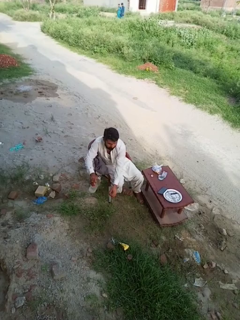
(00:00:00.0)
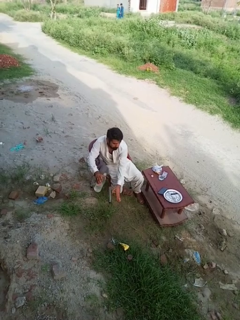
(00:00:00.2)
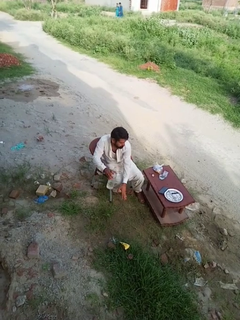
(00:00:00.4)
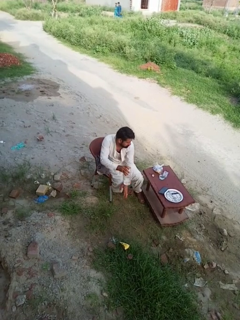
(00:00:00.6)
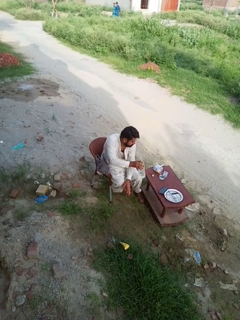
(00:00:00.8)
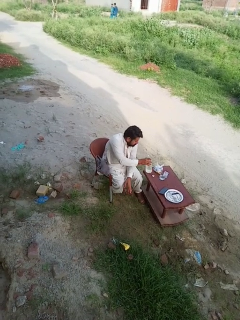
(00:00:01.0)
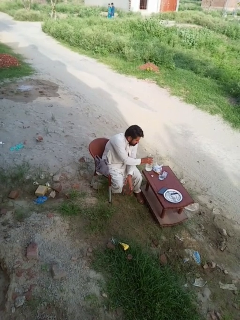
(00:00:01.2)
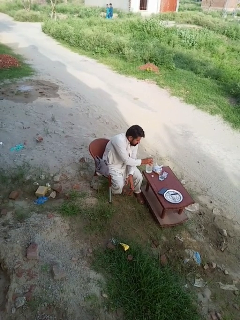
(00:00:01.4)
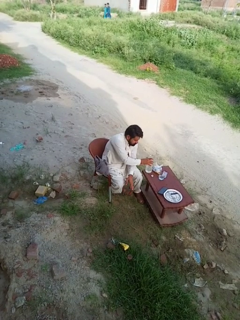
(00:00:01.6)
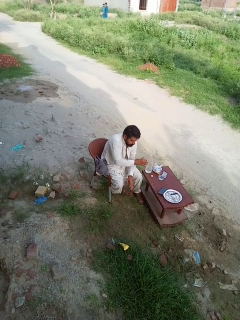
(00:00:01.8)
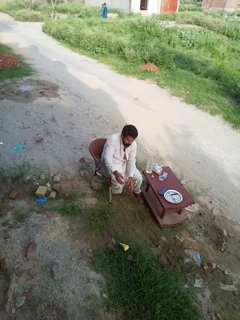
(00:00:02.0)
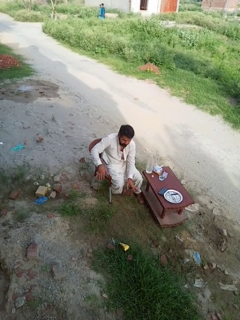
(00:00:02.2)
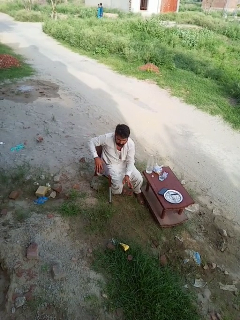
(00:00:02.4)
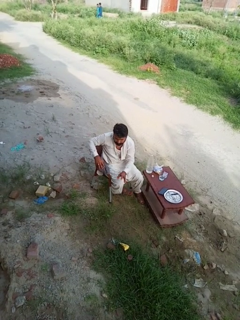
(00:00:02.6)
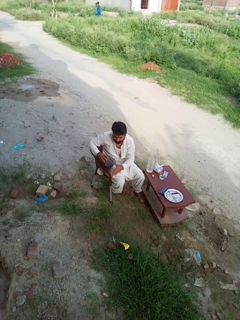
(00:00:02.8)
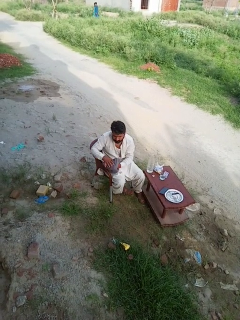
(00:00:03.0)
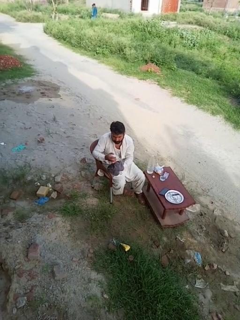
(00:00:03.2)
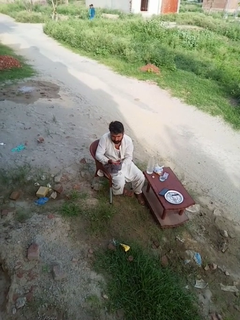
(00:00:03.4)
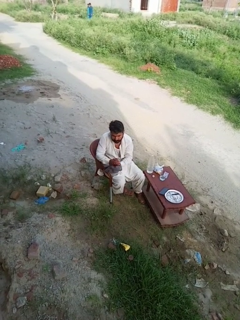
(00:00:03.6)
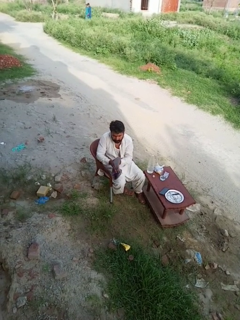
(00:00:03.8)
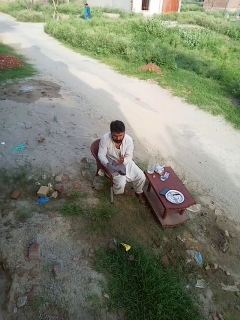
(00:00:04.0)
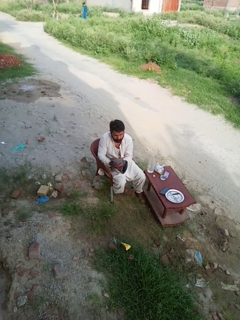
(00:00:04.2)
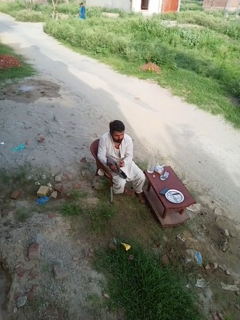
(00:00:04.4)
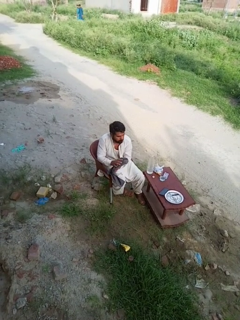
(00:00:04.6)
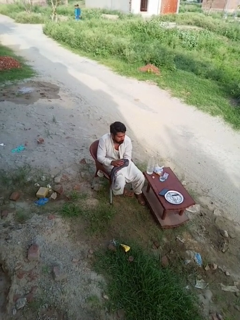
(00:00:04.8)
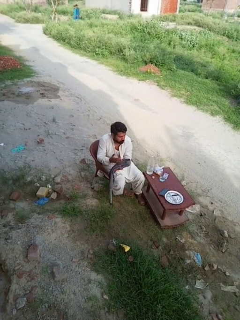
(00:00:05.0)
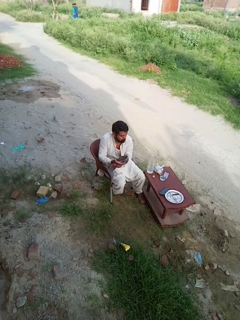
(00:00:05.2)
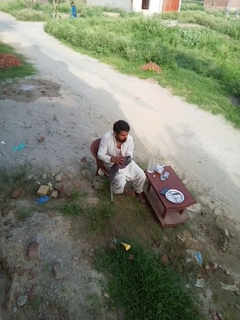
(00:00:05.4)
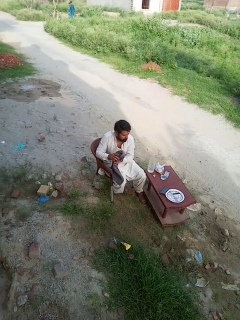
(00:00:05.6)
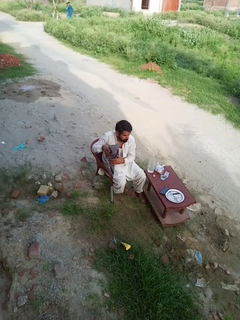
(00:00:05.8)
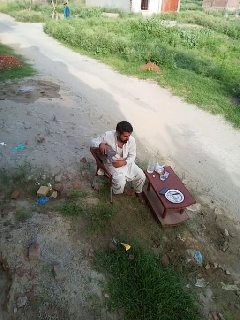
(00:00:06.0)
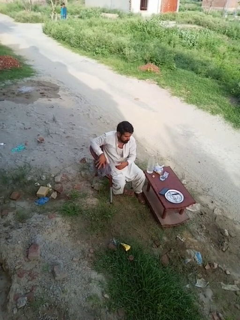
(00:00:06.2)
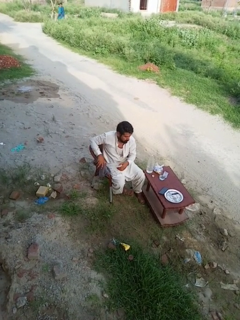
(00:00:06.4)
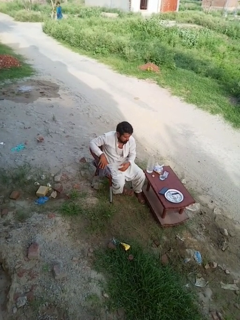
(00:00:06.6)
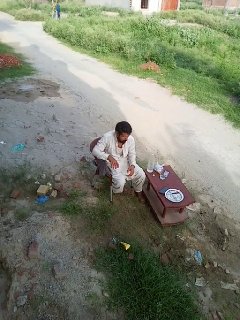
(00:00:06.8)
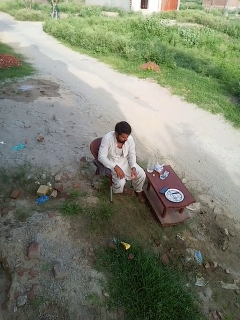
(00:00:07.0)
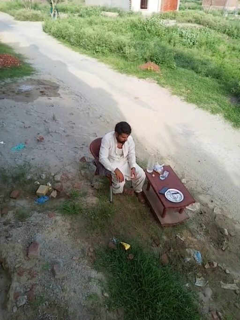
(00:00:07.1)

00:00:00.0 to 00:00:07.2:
person dries hands with towel

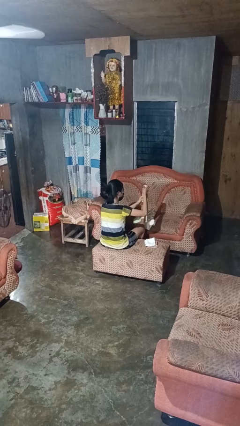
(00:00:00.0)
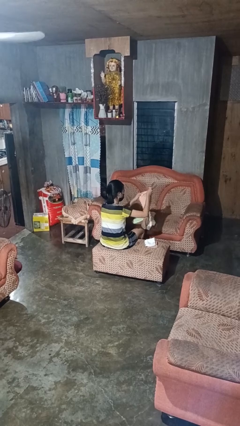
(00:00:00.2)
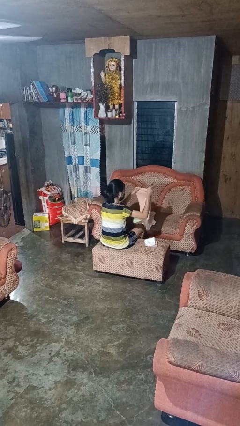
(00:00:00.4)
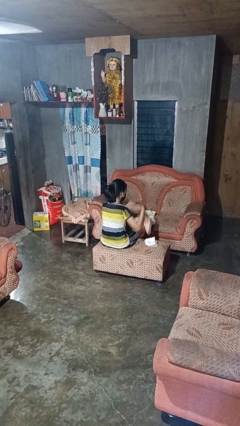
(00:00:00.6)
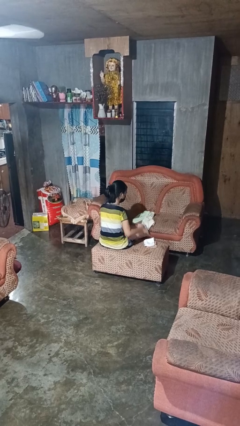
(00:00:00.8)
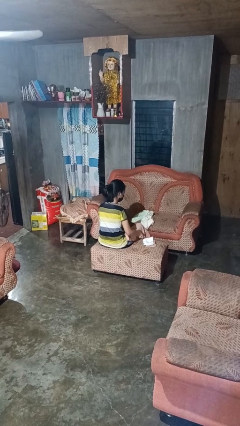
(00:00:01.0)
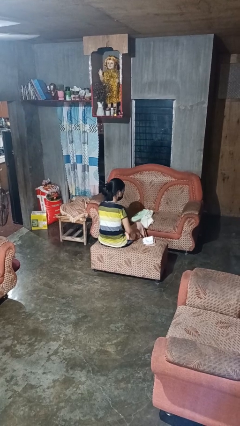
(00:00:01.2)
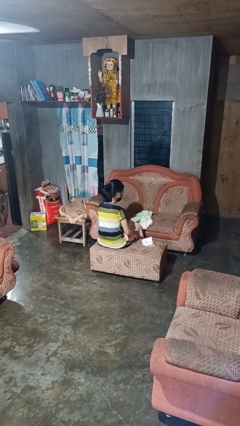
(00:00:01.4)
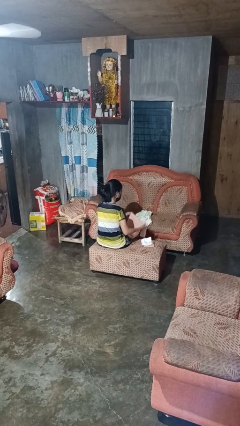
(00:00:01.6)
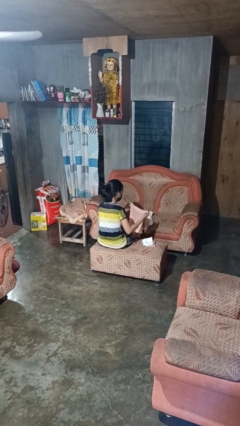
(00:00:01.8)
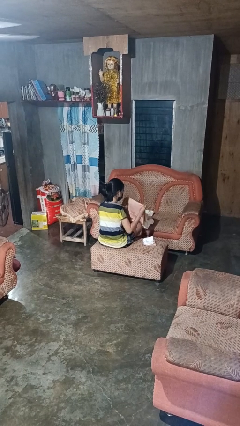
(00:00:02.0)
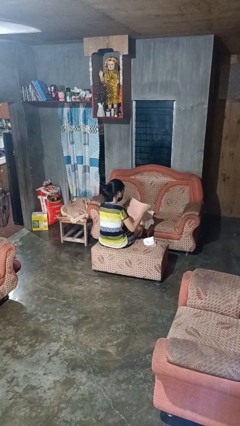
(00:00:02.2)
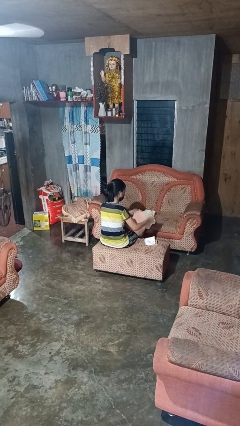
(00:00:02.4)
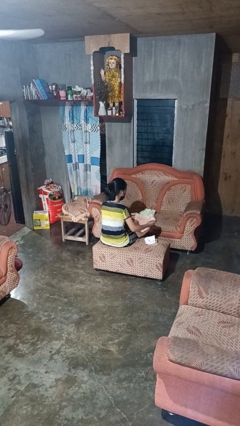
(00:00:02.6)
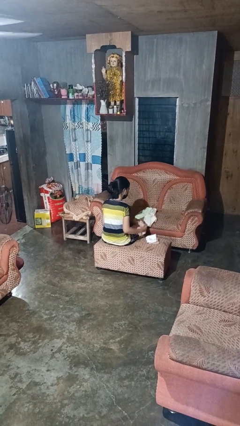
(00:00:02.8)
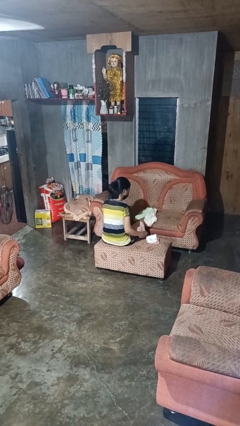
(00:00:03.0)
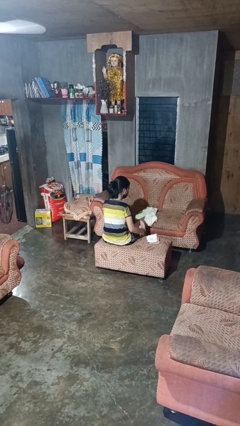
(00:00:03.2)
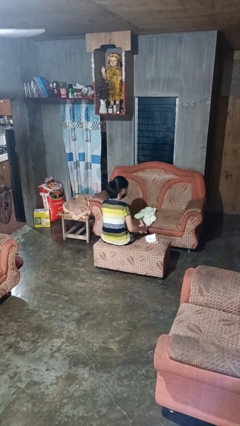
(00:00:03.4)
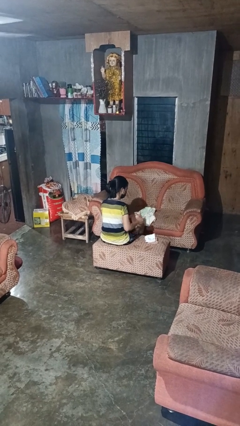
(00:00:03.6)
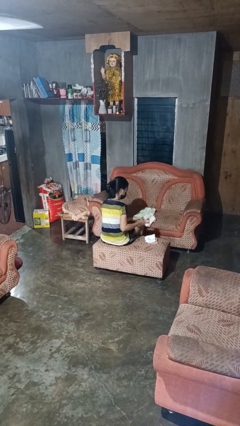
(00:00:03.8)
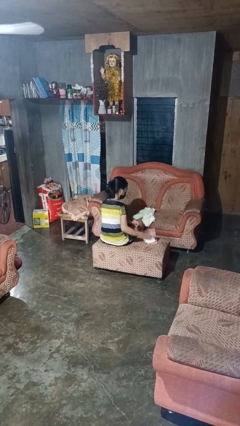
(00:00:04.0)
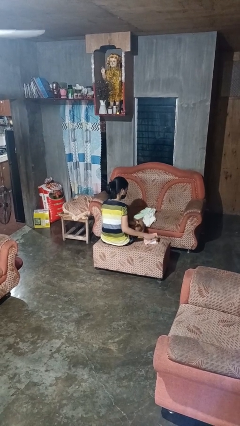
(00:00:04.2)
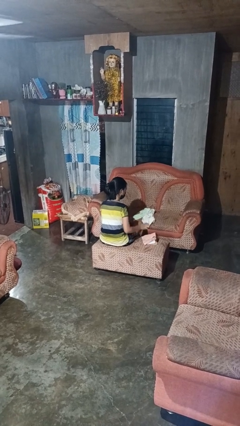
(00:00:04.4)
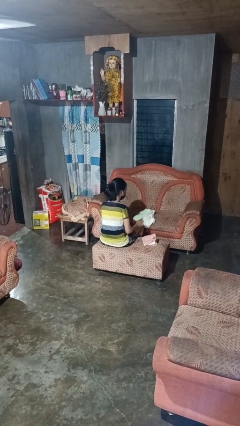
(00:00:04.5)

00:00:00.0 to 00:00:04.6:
person folds towel

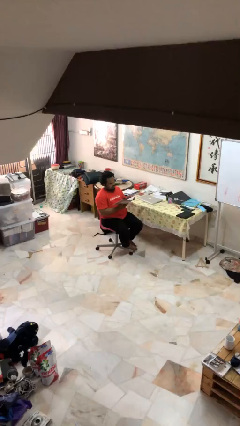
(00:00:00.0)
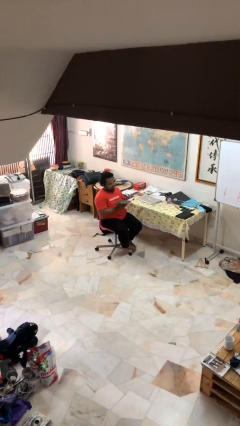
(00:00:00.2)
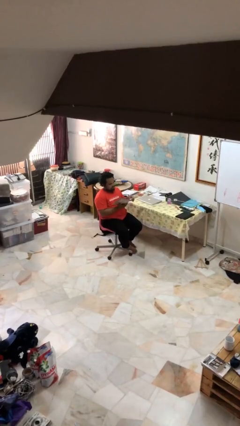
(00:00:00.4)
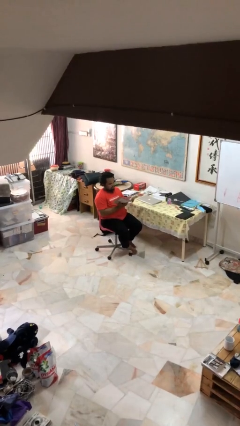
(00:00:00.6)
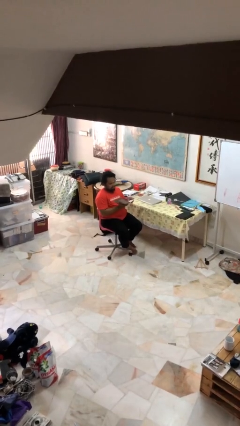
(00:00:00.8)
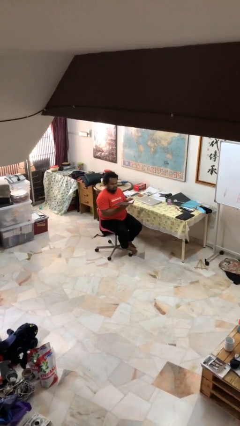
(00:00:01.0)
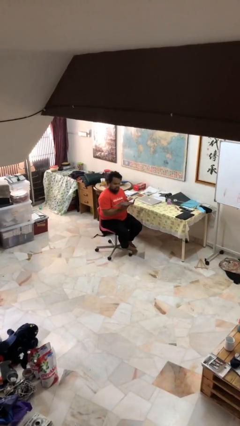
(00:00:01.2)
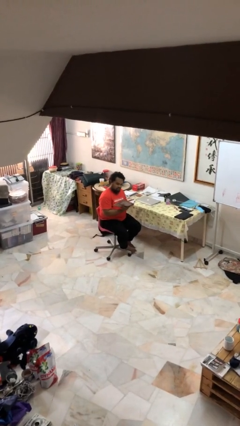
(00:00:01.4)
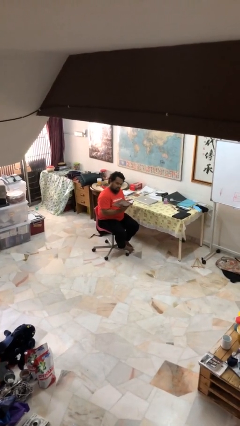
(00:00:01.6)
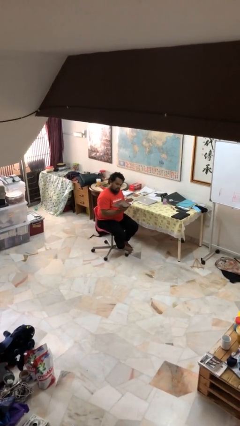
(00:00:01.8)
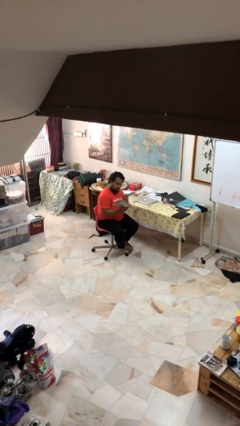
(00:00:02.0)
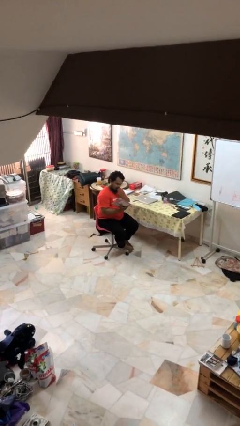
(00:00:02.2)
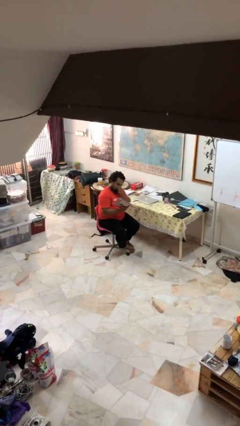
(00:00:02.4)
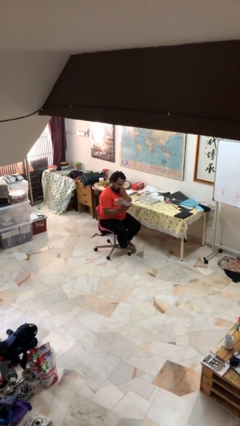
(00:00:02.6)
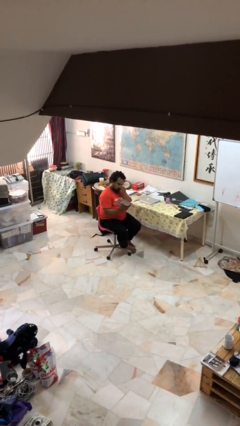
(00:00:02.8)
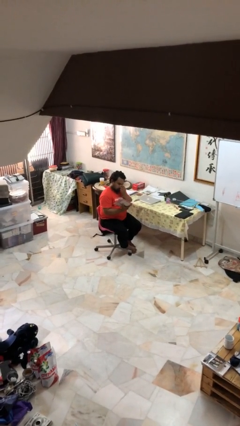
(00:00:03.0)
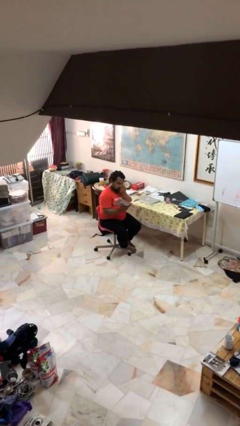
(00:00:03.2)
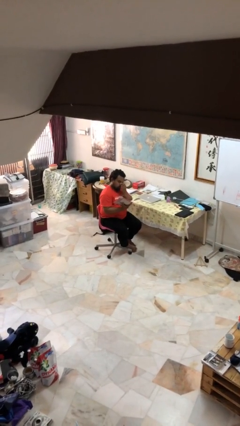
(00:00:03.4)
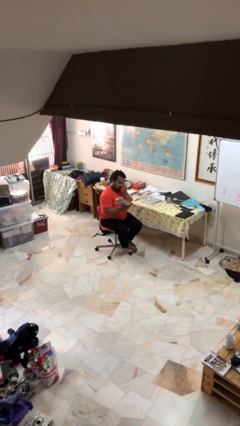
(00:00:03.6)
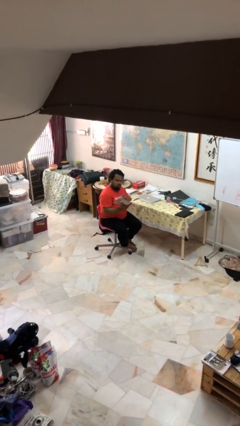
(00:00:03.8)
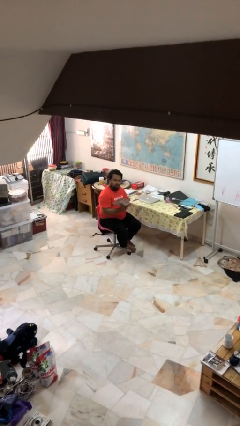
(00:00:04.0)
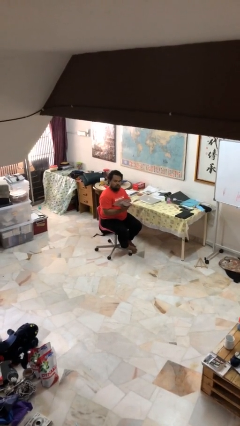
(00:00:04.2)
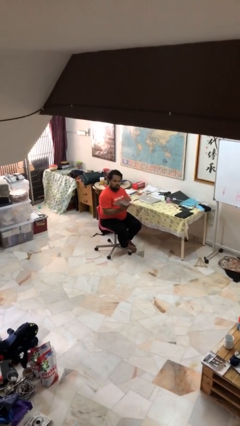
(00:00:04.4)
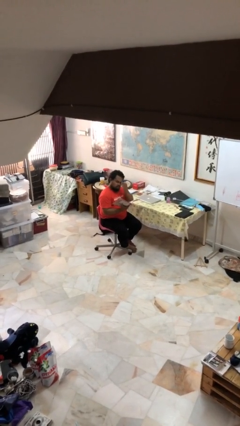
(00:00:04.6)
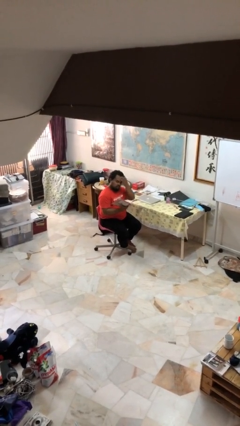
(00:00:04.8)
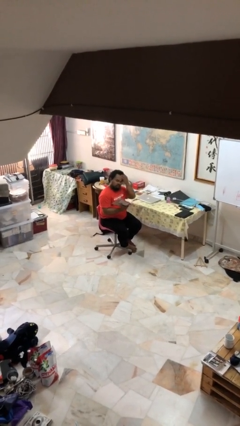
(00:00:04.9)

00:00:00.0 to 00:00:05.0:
person reads document

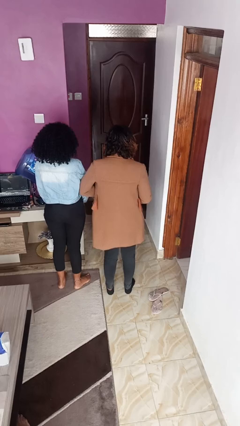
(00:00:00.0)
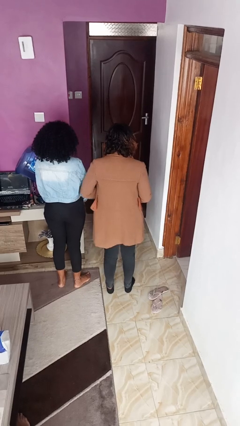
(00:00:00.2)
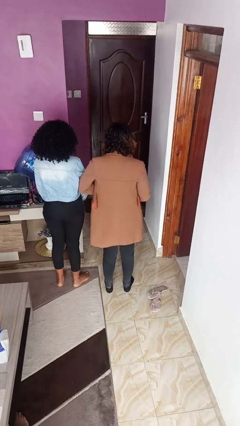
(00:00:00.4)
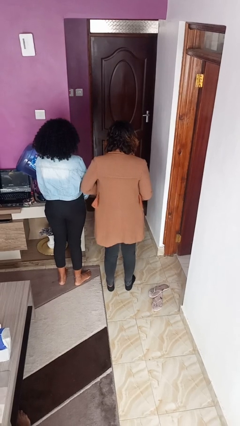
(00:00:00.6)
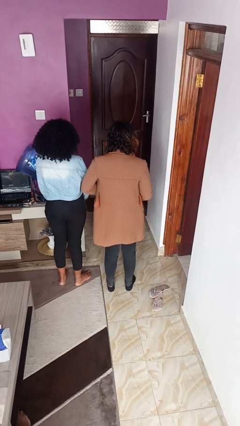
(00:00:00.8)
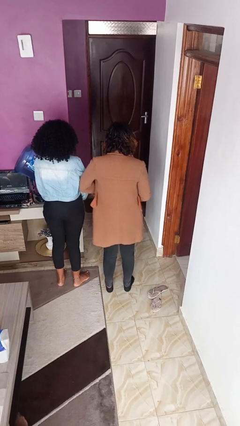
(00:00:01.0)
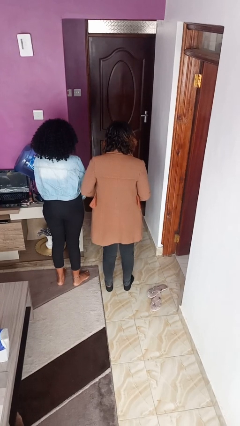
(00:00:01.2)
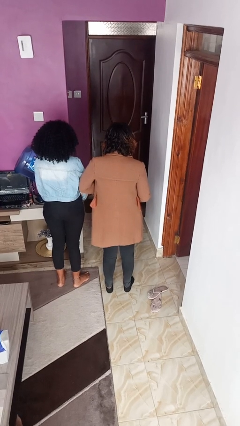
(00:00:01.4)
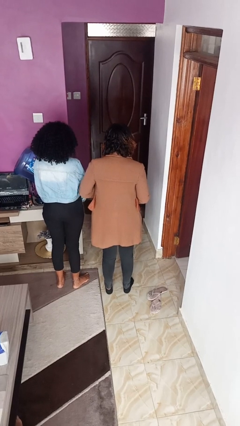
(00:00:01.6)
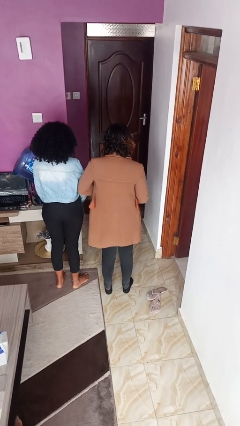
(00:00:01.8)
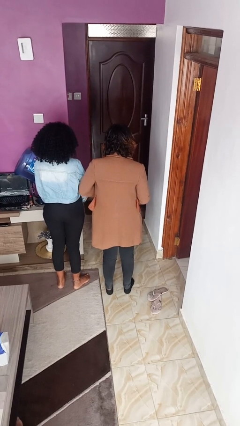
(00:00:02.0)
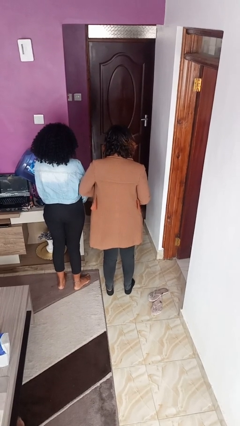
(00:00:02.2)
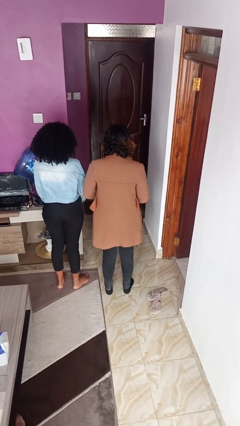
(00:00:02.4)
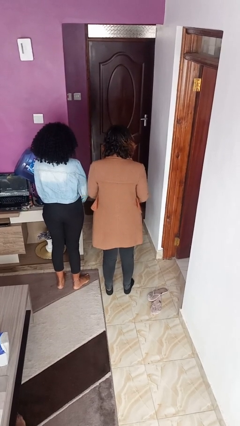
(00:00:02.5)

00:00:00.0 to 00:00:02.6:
person nudges person with elbow

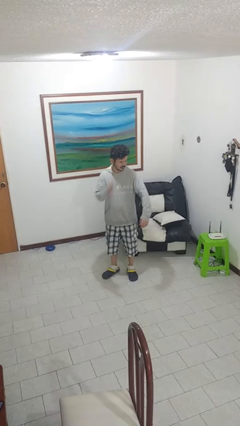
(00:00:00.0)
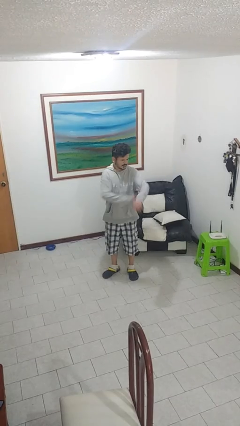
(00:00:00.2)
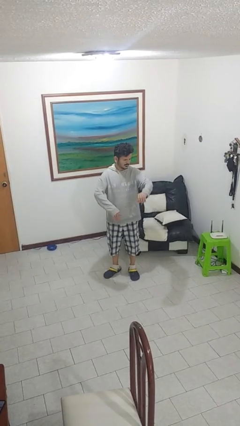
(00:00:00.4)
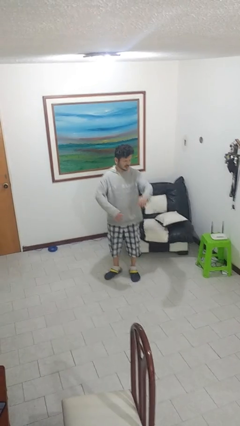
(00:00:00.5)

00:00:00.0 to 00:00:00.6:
person swats bug
